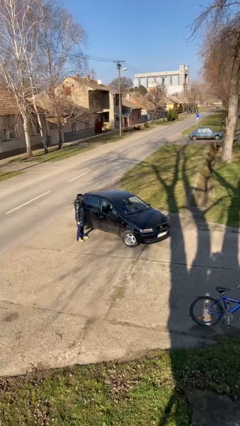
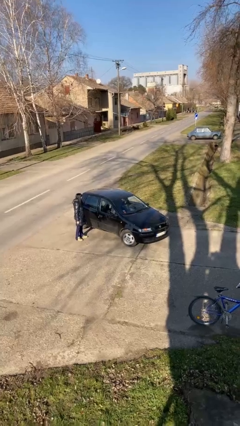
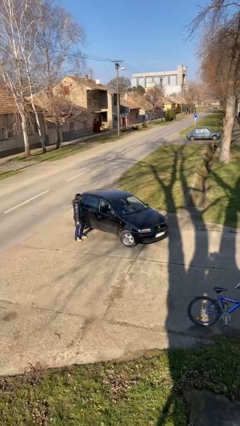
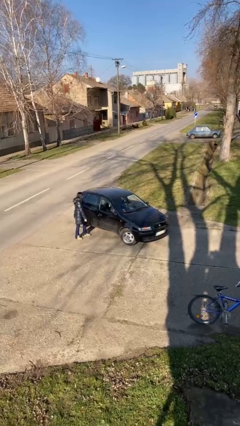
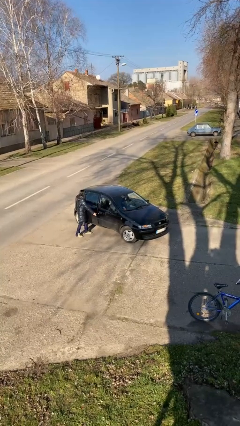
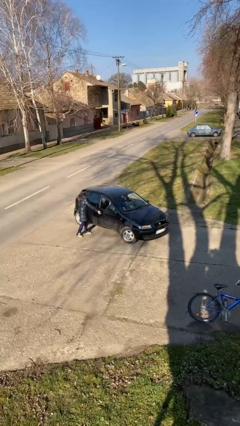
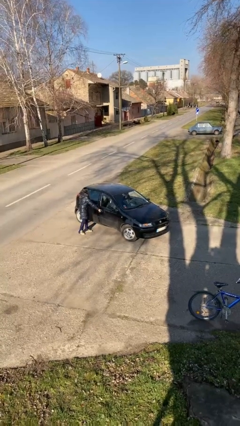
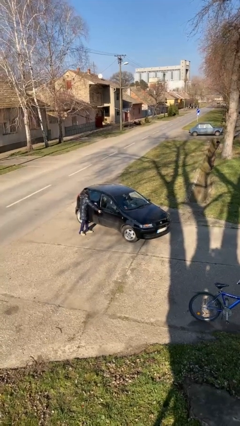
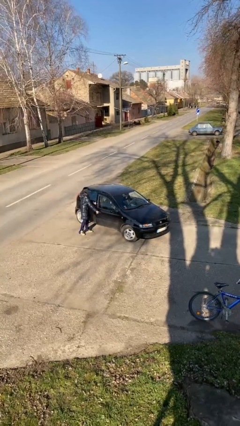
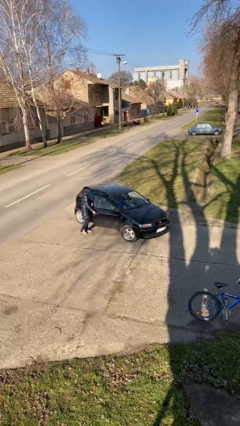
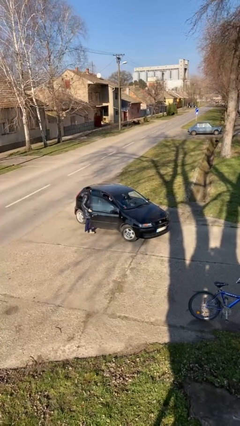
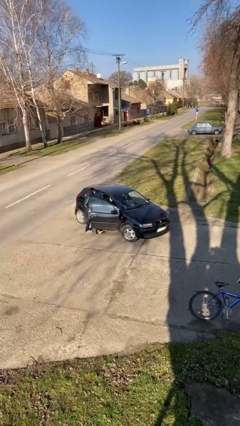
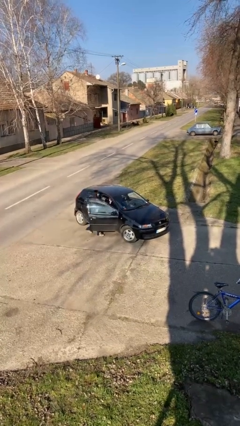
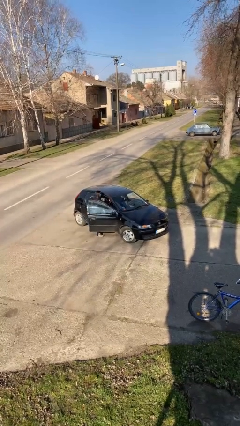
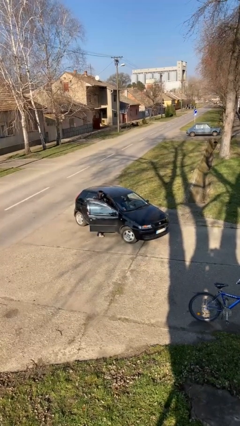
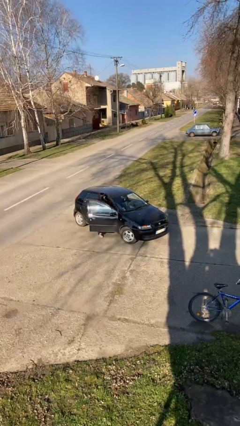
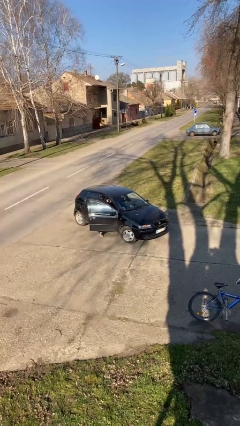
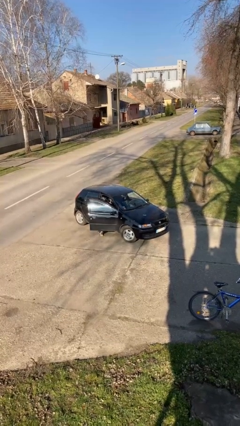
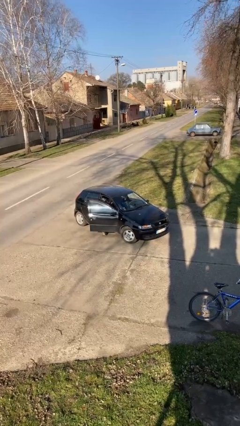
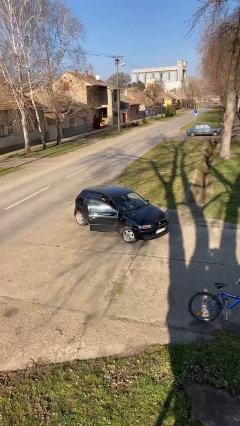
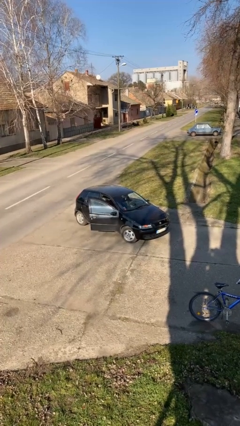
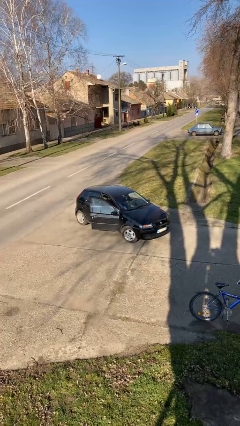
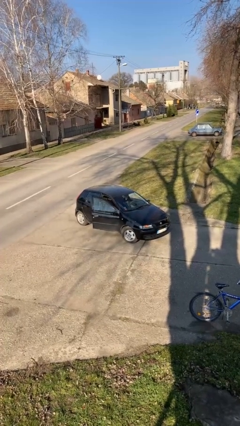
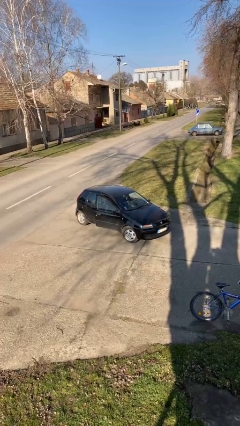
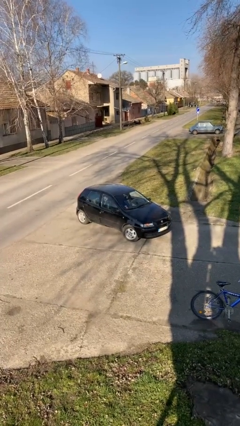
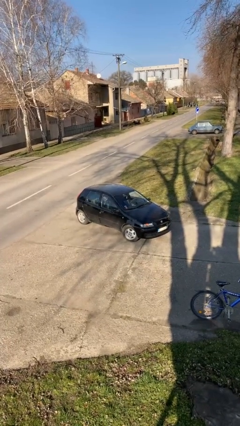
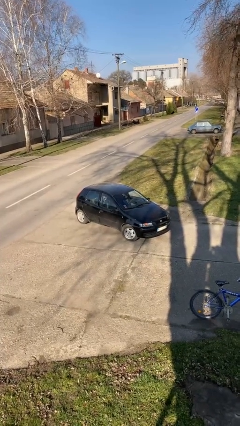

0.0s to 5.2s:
car picks up person

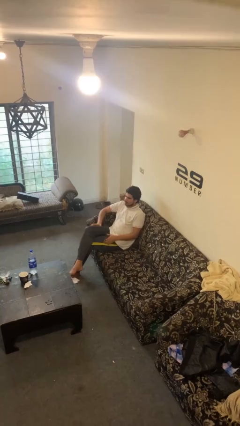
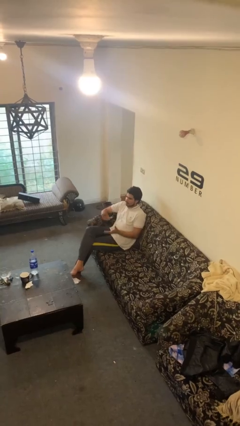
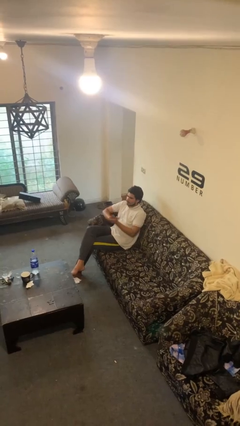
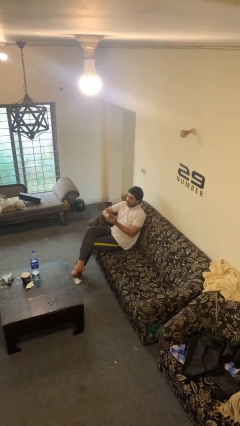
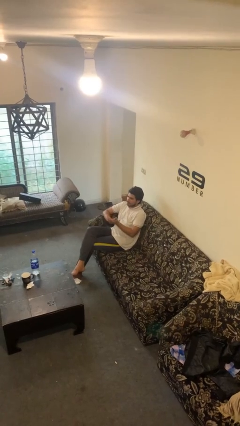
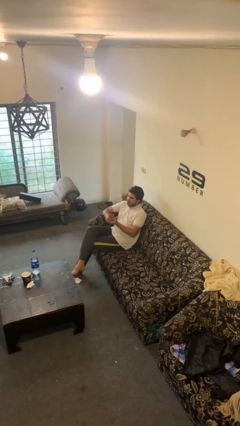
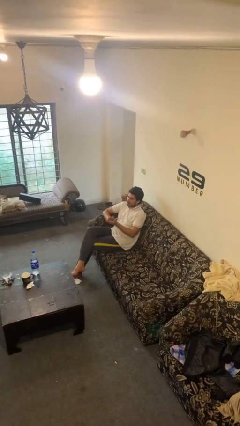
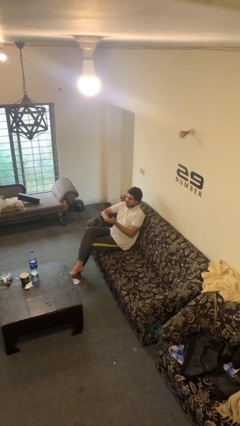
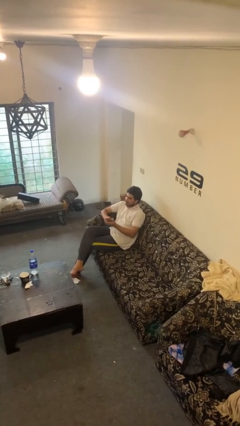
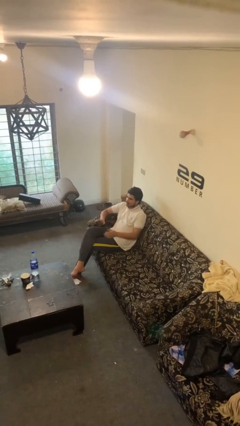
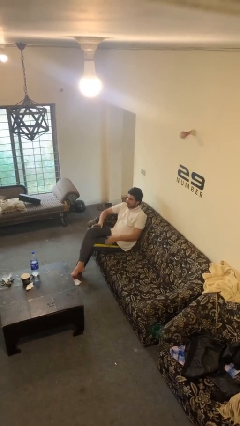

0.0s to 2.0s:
person claps hands

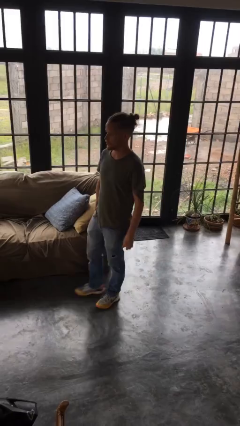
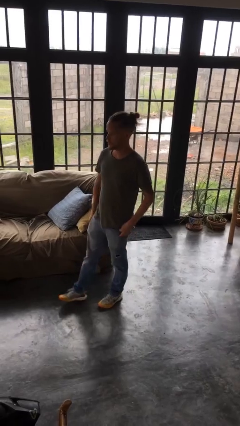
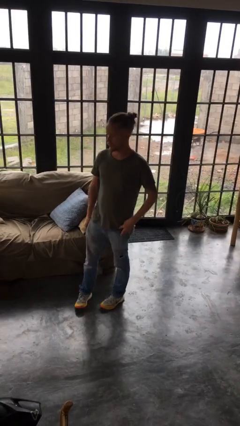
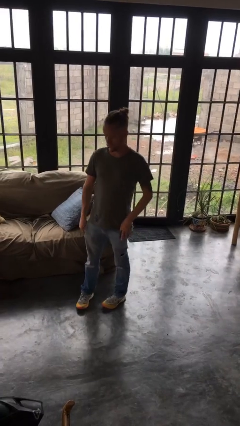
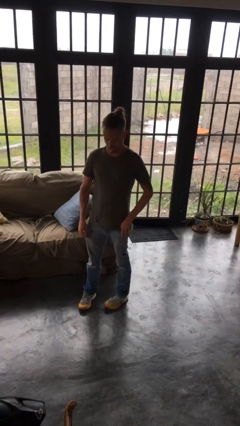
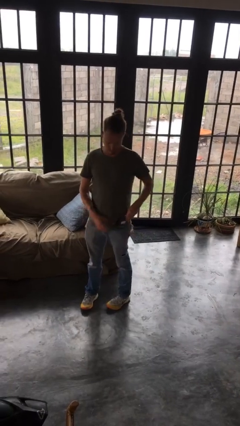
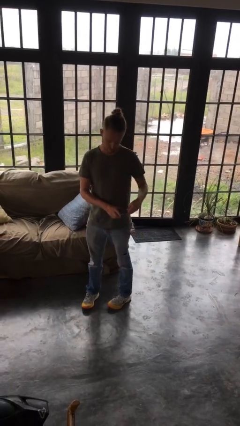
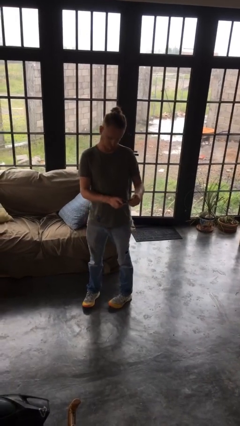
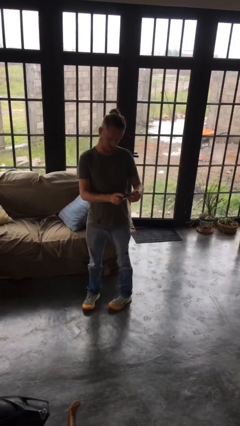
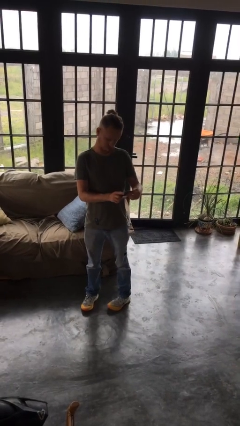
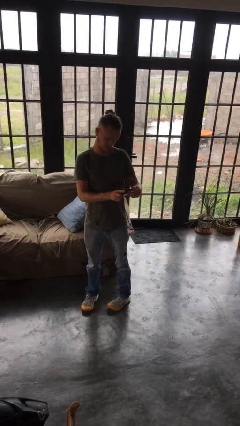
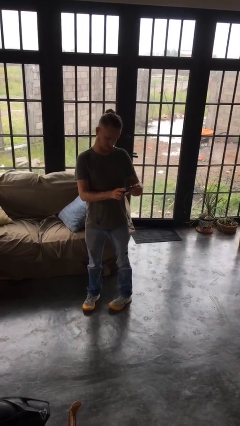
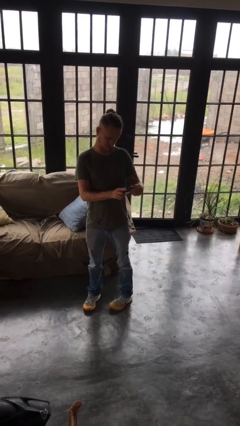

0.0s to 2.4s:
person takes phone from pocket

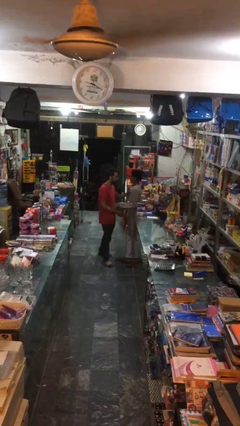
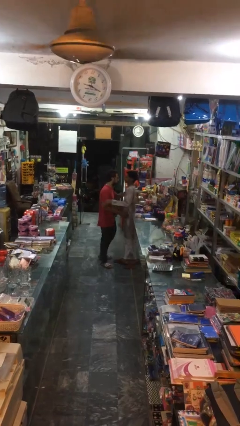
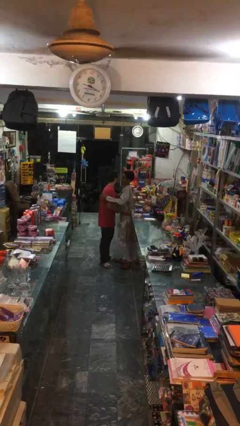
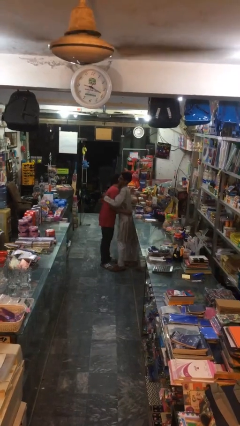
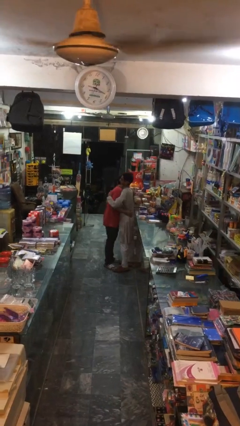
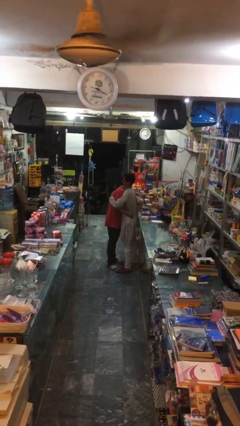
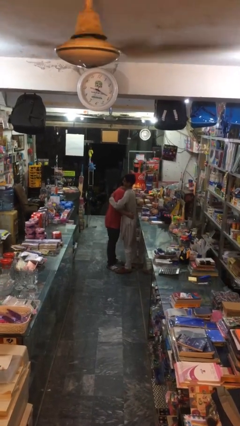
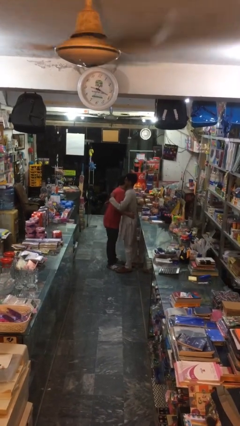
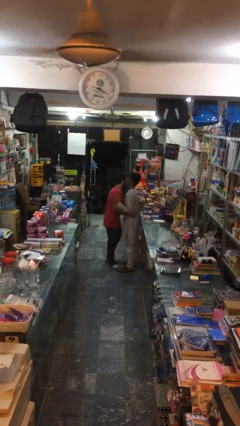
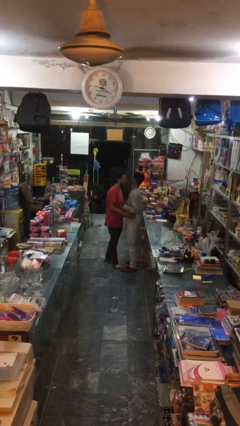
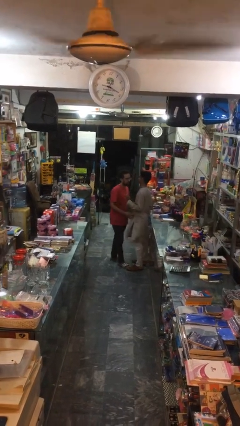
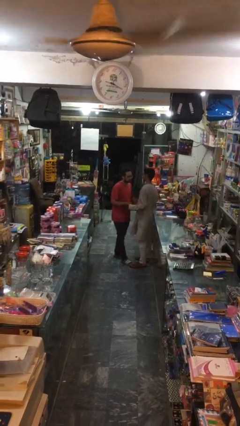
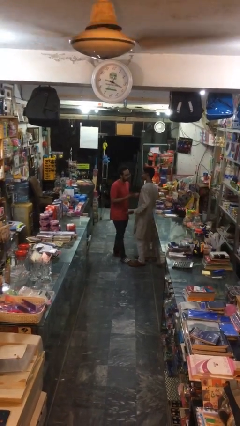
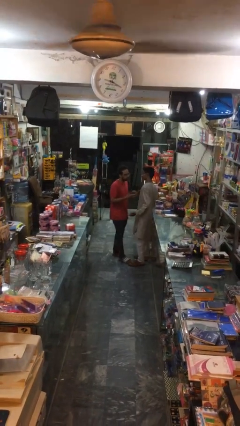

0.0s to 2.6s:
person embraces person

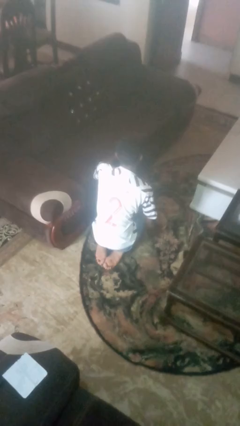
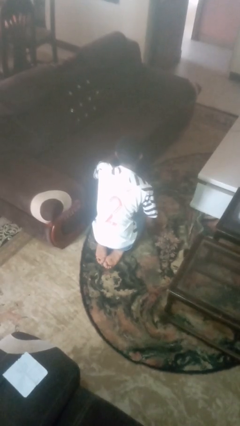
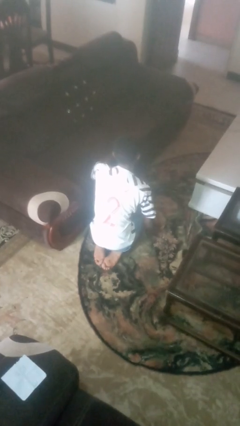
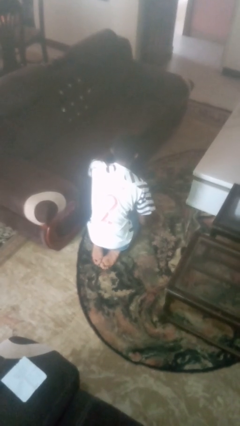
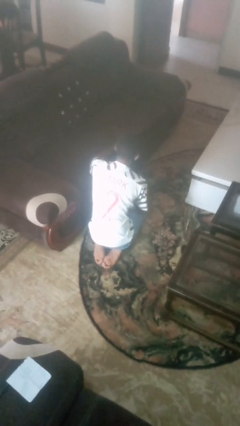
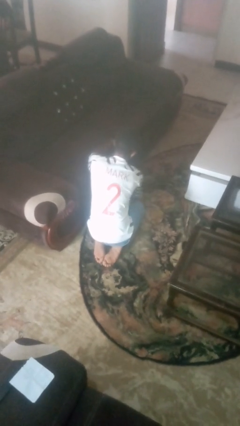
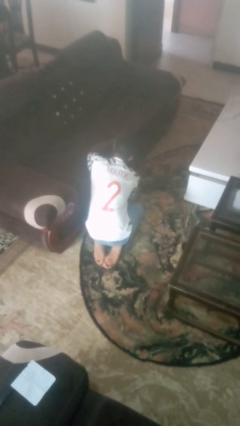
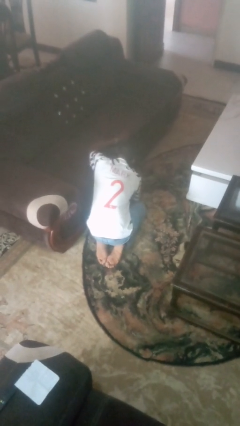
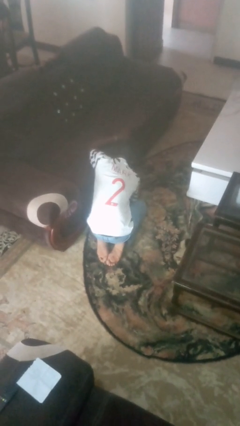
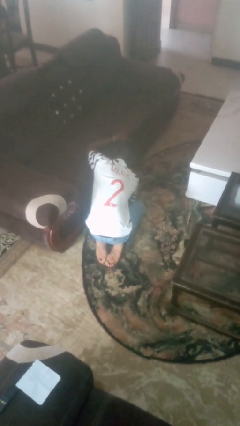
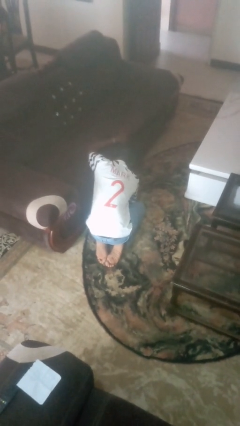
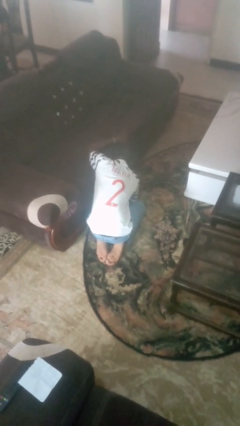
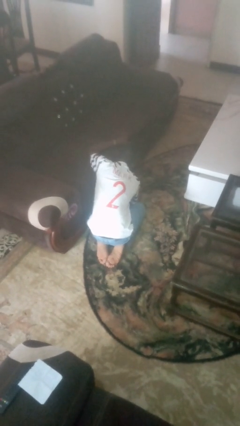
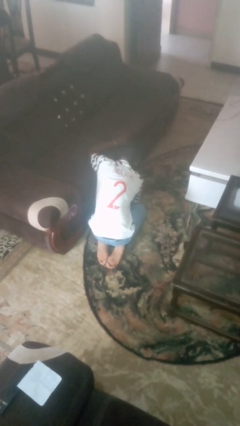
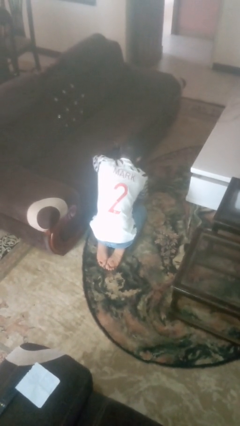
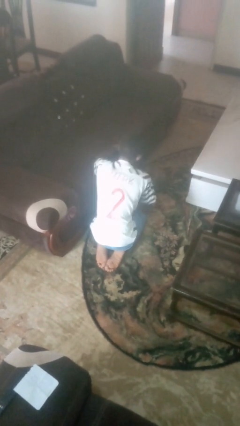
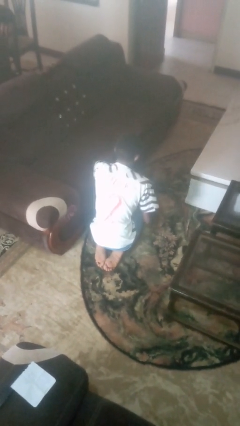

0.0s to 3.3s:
person searches under couch

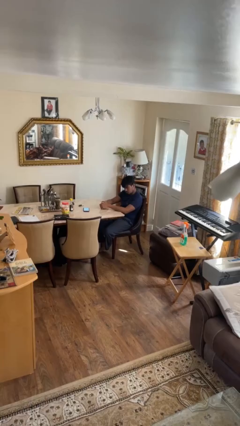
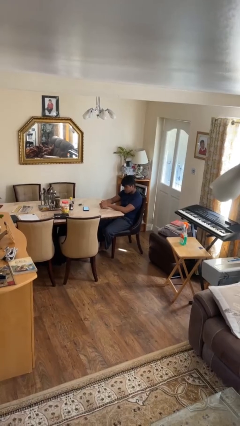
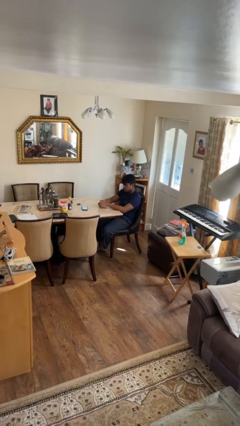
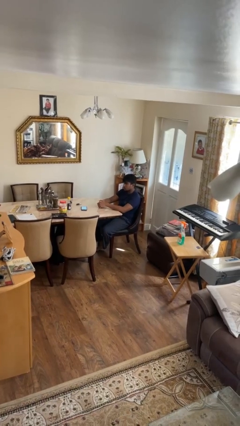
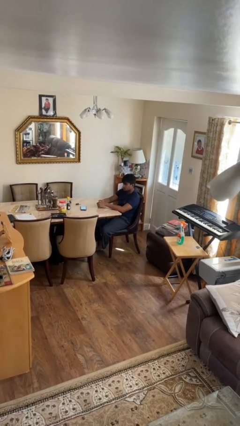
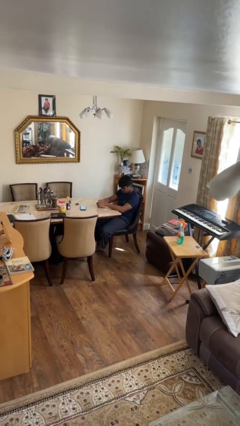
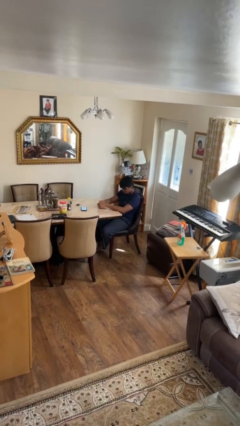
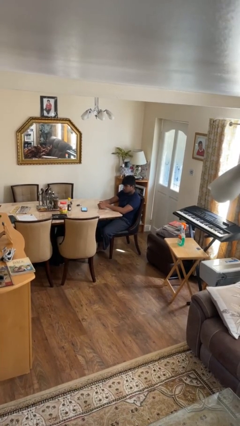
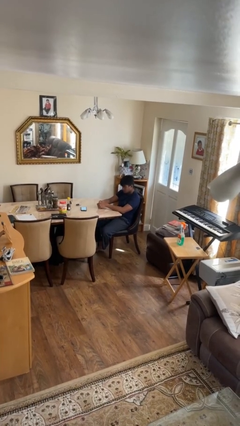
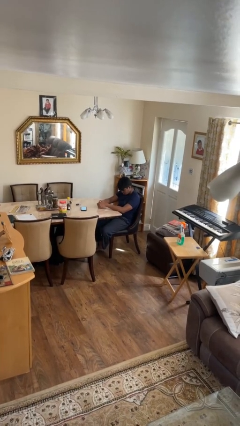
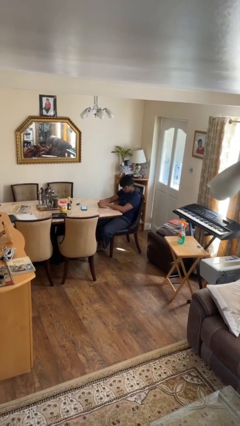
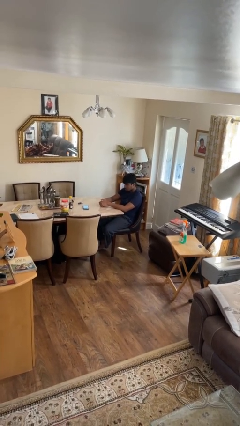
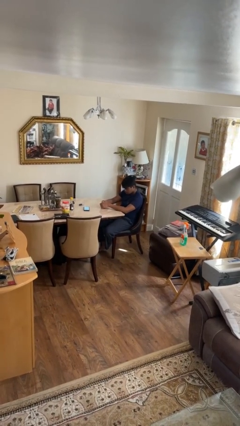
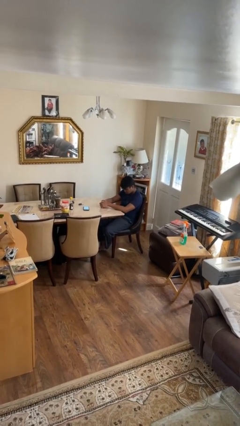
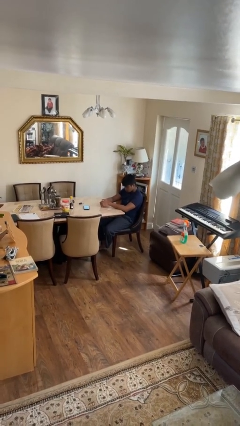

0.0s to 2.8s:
person nods head
